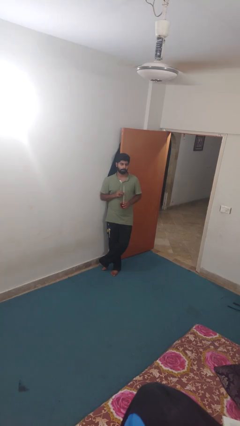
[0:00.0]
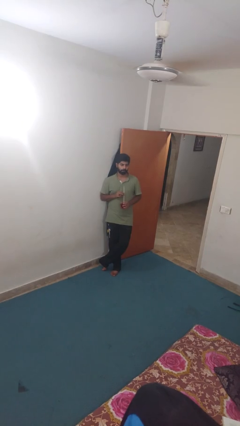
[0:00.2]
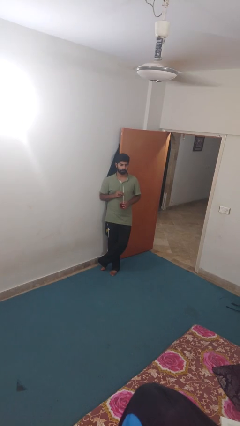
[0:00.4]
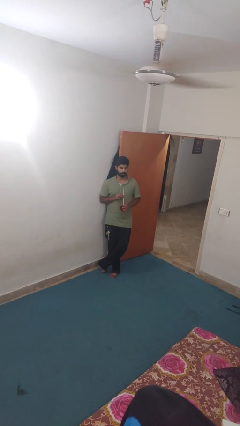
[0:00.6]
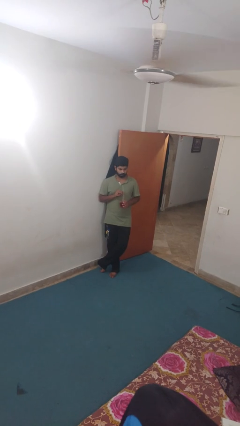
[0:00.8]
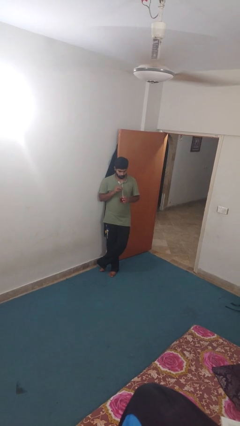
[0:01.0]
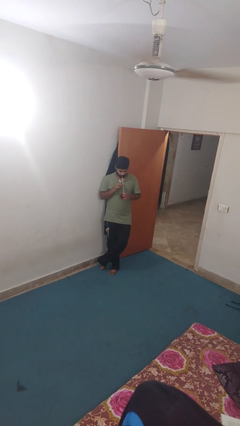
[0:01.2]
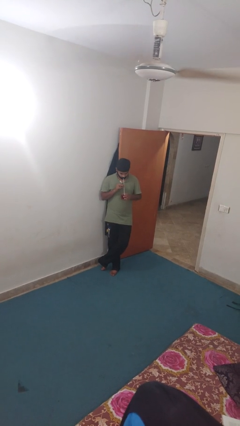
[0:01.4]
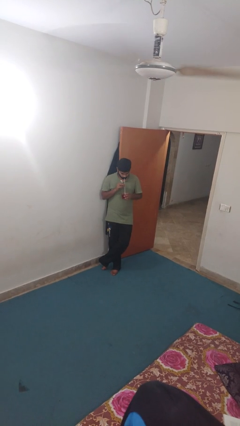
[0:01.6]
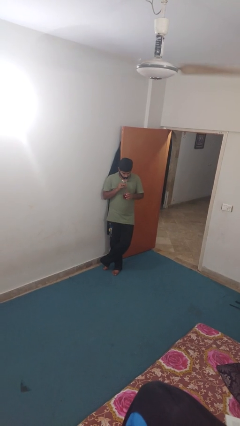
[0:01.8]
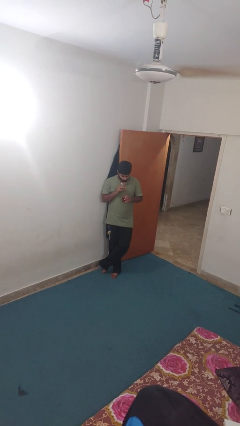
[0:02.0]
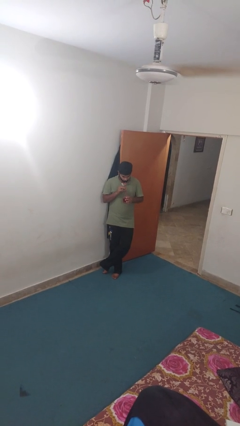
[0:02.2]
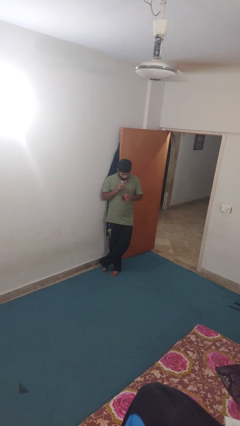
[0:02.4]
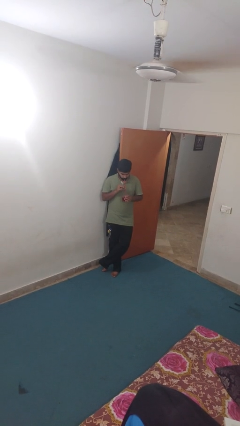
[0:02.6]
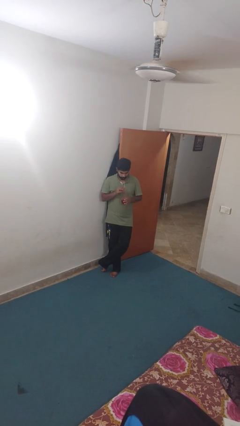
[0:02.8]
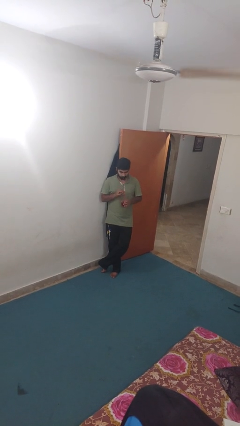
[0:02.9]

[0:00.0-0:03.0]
person drinks from straw

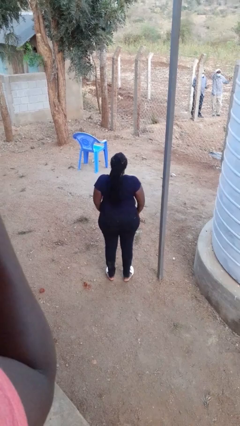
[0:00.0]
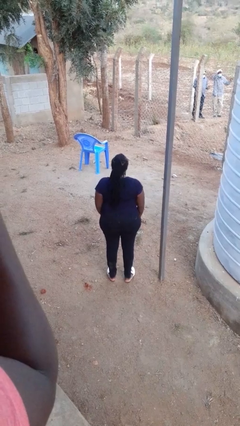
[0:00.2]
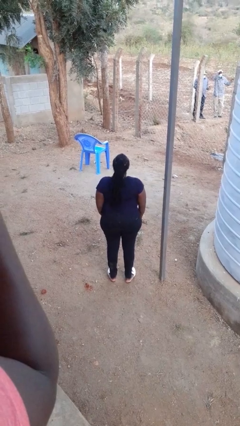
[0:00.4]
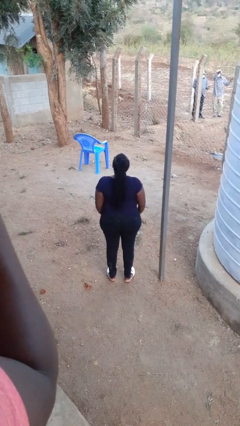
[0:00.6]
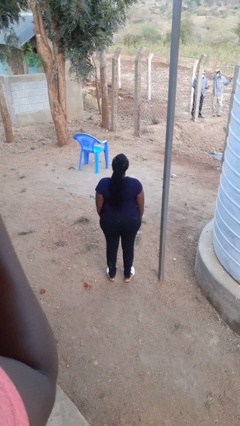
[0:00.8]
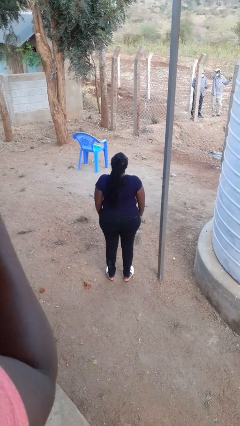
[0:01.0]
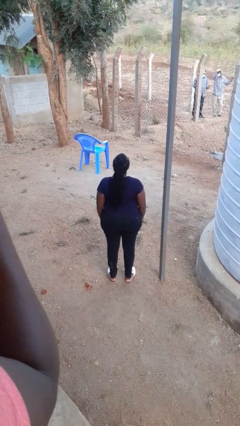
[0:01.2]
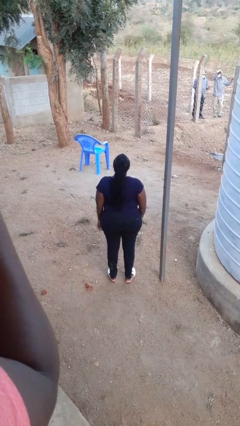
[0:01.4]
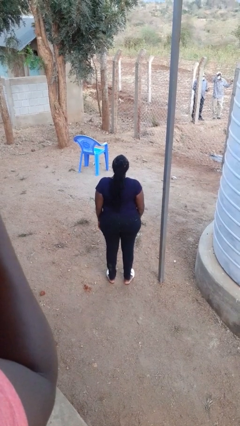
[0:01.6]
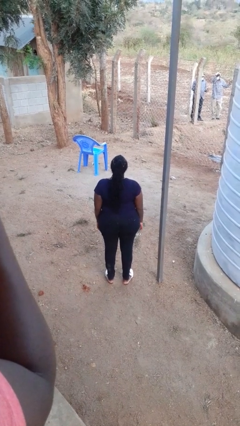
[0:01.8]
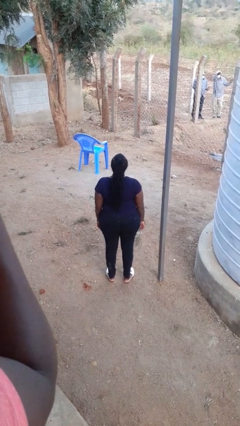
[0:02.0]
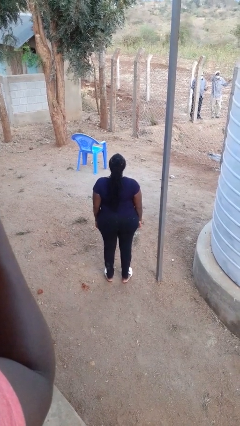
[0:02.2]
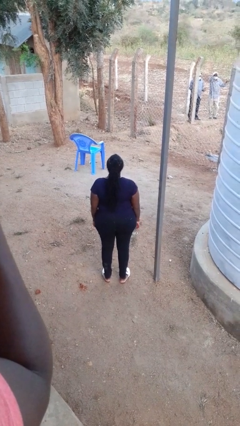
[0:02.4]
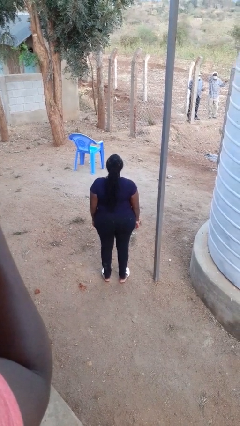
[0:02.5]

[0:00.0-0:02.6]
person shrugs

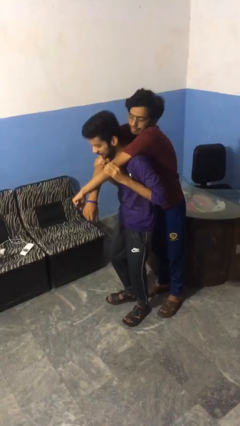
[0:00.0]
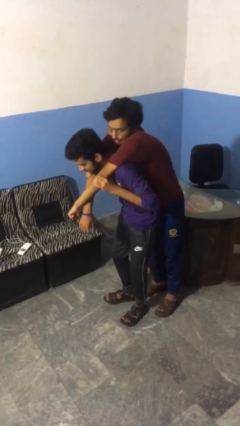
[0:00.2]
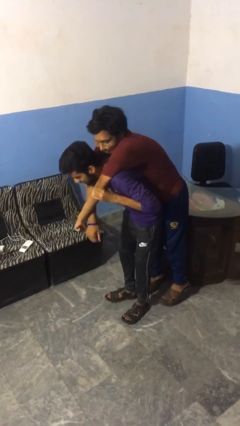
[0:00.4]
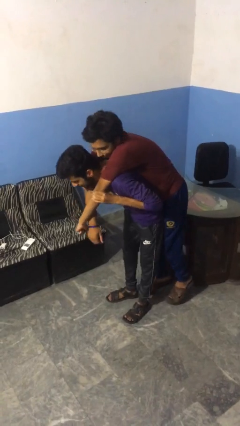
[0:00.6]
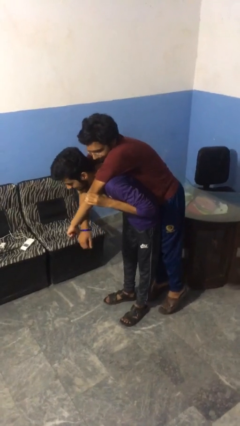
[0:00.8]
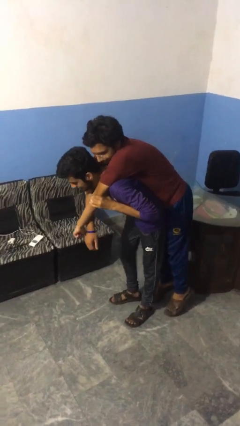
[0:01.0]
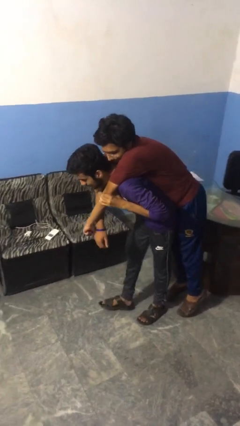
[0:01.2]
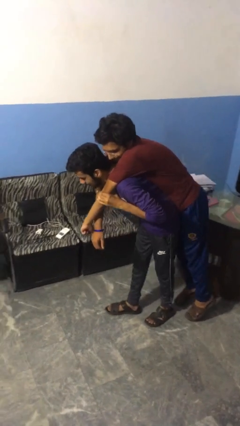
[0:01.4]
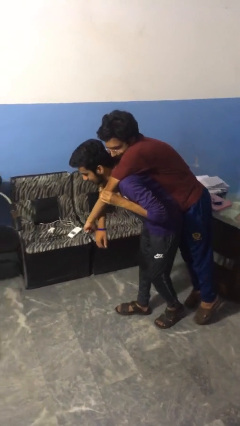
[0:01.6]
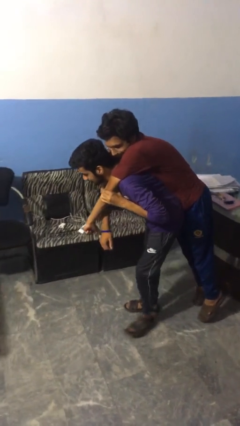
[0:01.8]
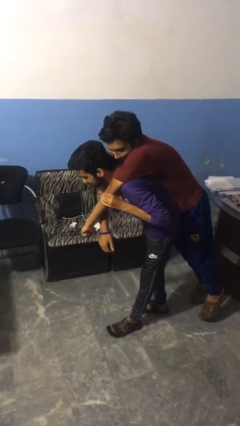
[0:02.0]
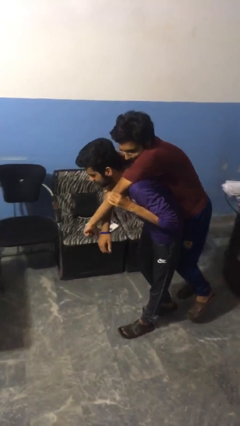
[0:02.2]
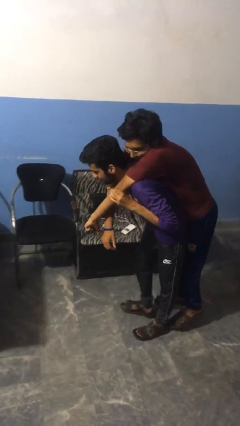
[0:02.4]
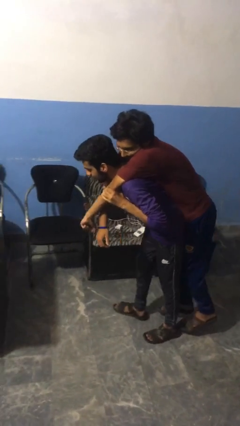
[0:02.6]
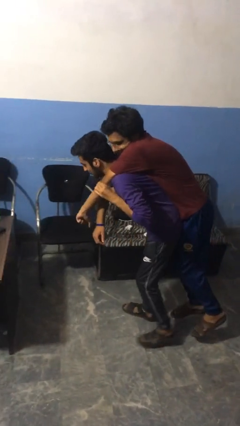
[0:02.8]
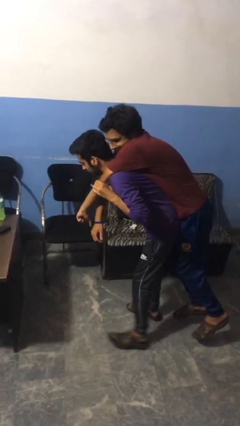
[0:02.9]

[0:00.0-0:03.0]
person carries person on back

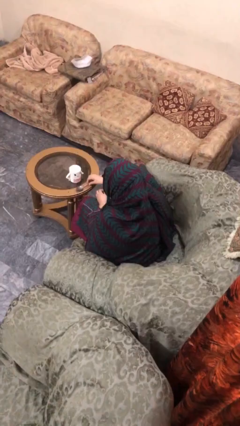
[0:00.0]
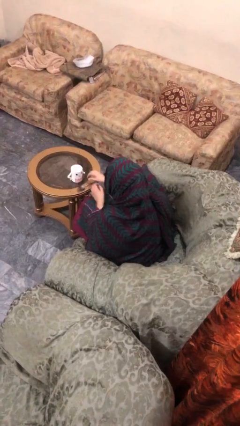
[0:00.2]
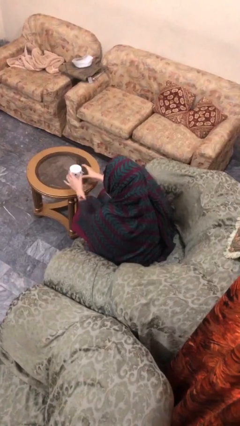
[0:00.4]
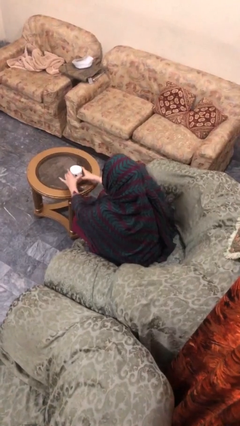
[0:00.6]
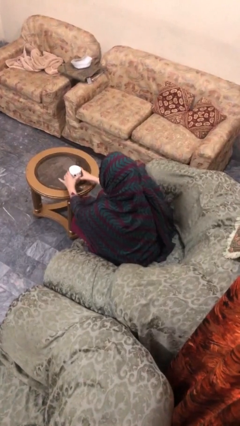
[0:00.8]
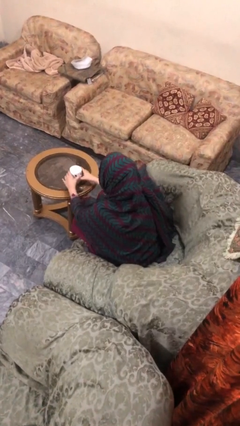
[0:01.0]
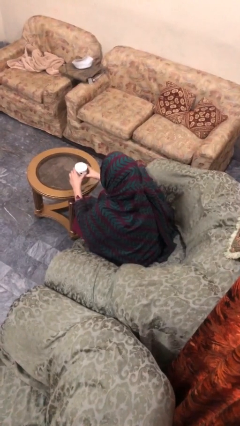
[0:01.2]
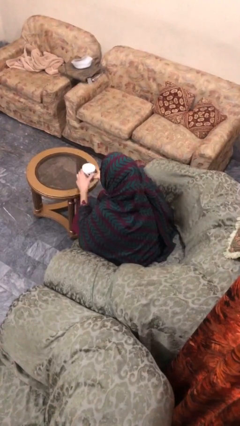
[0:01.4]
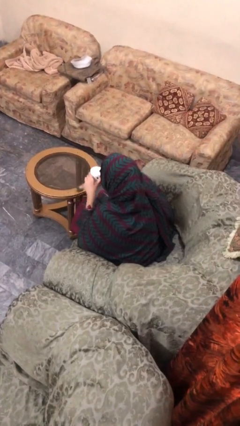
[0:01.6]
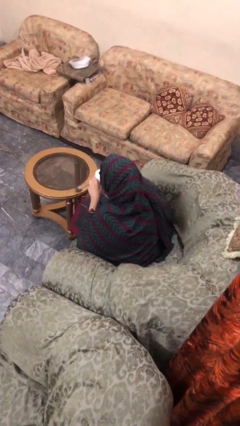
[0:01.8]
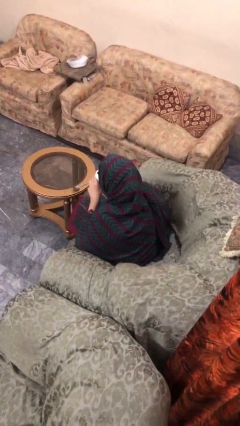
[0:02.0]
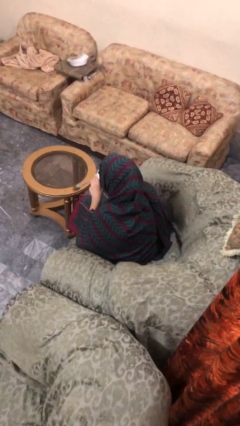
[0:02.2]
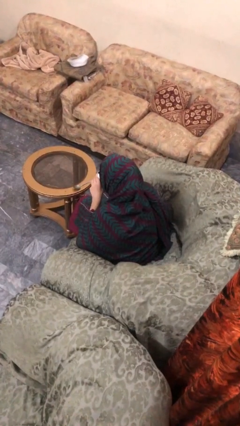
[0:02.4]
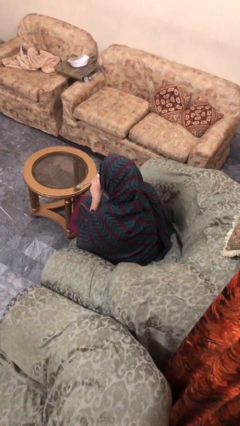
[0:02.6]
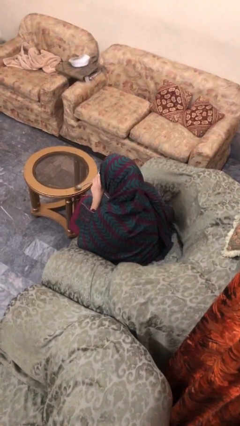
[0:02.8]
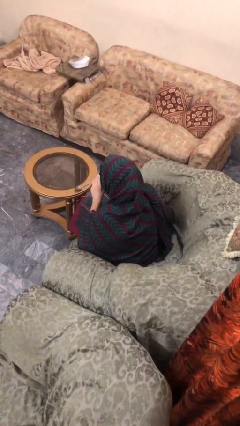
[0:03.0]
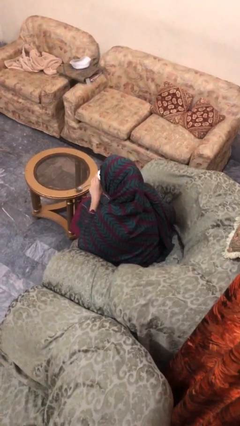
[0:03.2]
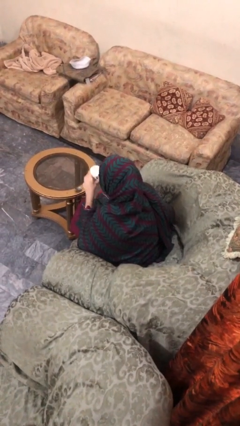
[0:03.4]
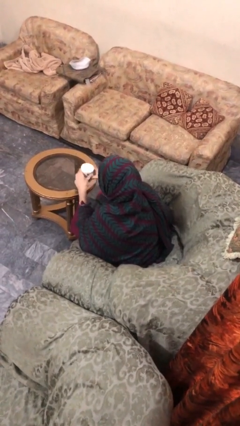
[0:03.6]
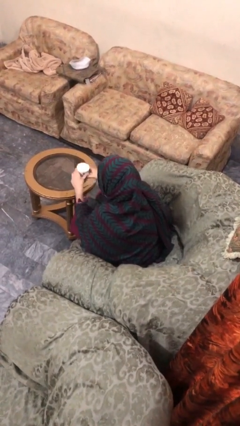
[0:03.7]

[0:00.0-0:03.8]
person drinks from mug

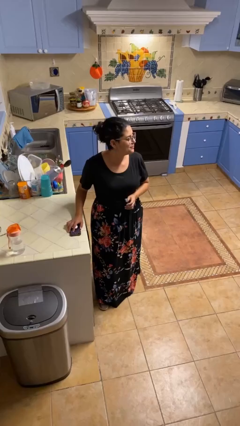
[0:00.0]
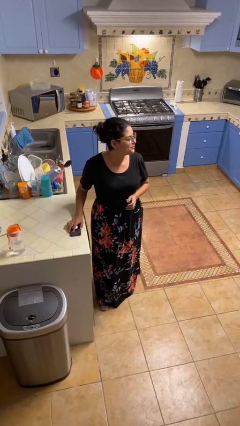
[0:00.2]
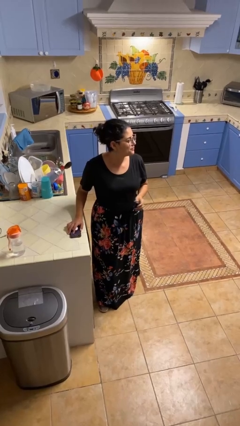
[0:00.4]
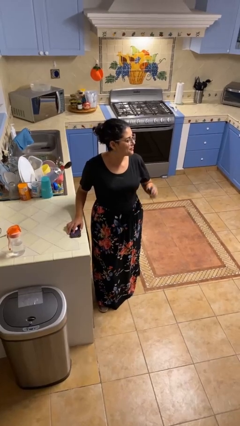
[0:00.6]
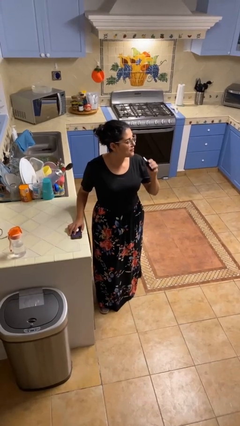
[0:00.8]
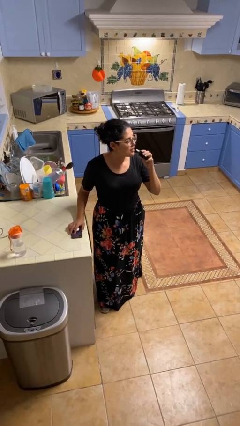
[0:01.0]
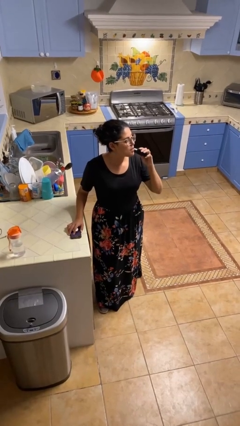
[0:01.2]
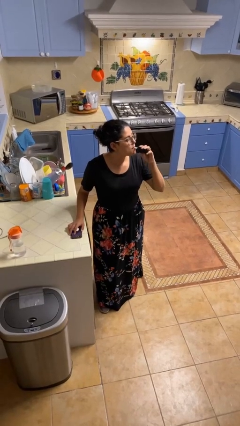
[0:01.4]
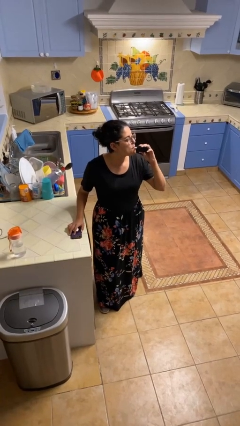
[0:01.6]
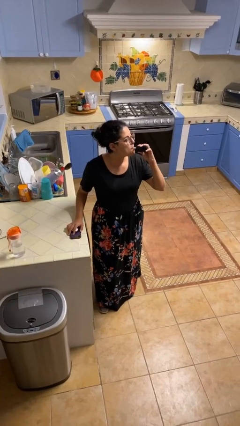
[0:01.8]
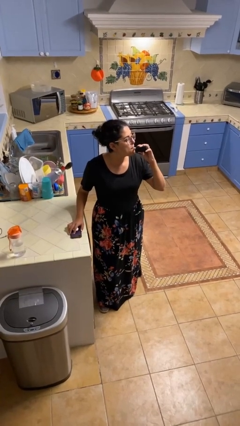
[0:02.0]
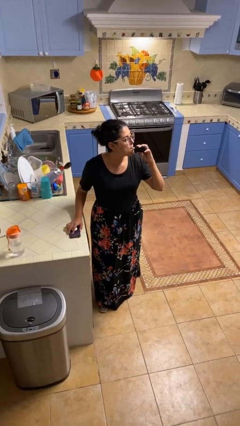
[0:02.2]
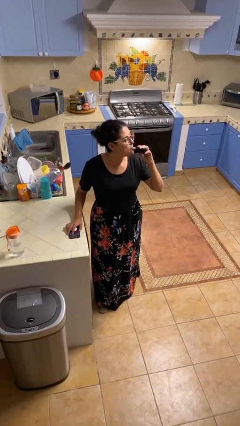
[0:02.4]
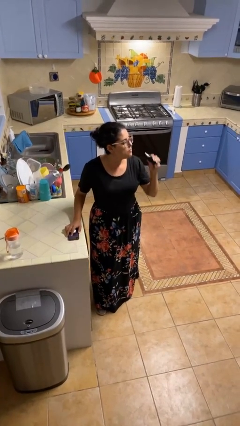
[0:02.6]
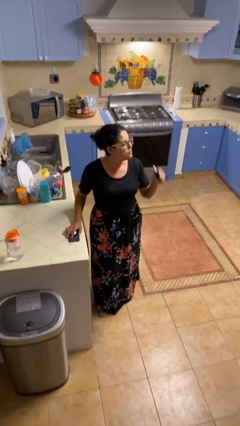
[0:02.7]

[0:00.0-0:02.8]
person vapes

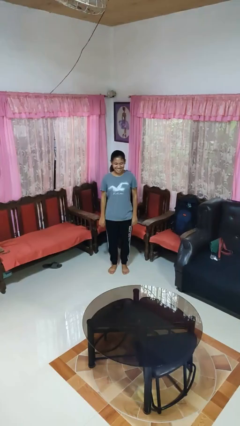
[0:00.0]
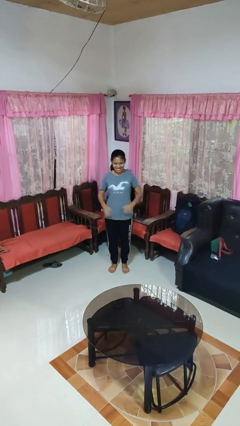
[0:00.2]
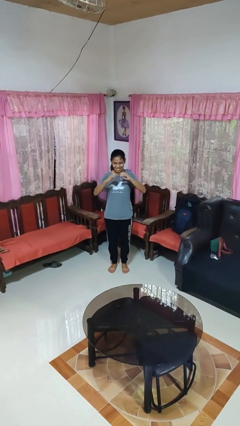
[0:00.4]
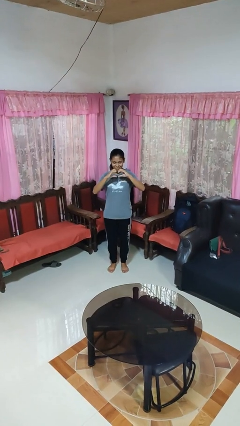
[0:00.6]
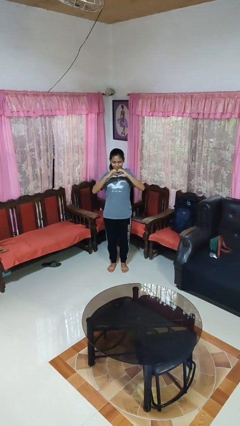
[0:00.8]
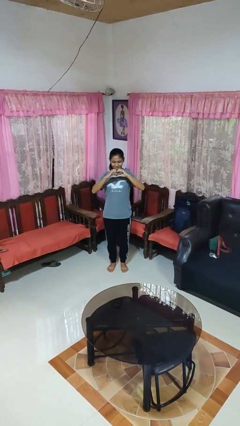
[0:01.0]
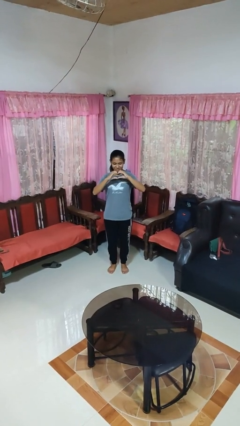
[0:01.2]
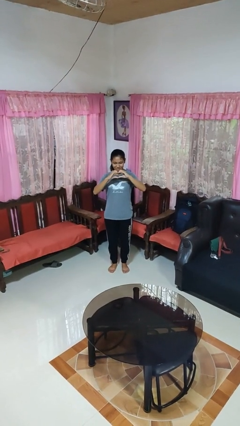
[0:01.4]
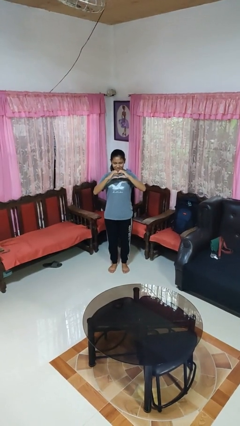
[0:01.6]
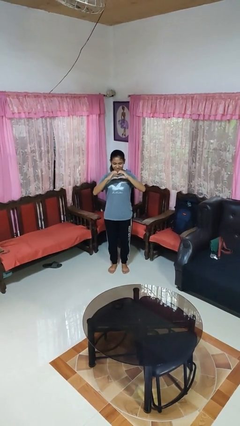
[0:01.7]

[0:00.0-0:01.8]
person gestures heart

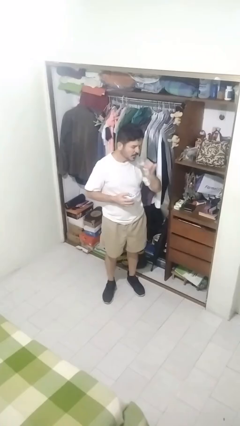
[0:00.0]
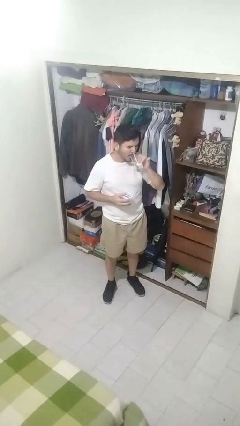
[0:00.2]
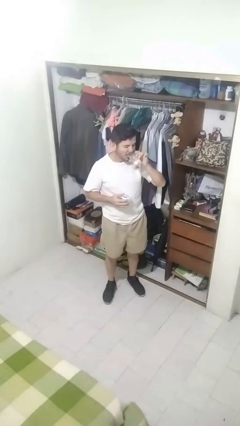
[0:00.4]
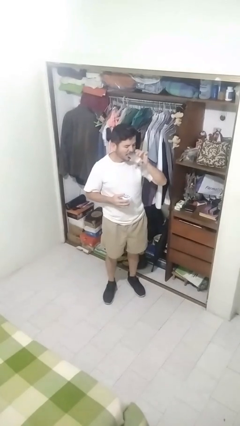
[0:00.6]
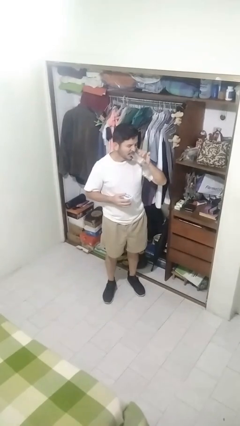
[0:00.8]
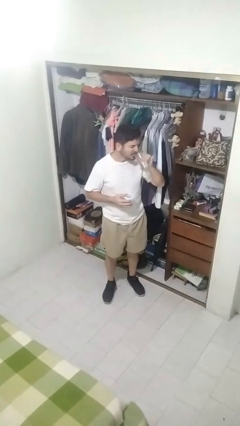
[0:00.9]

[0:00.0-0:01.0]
person drinks from cup
